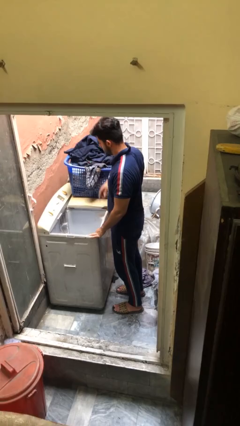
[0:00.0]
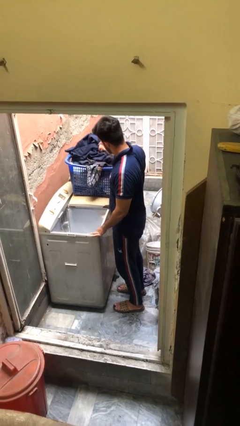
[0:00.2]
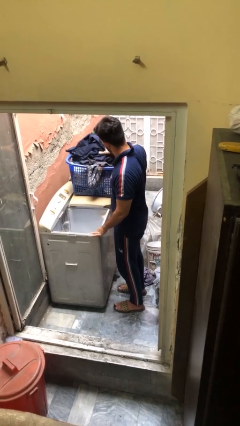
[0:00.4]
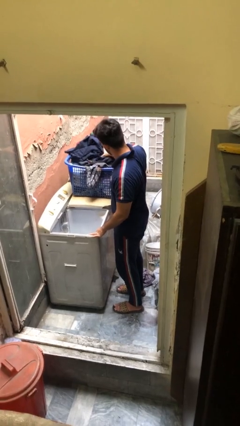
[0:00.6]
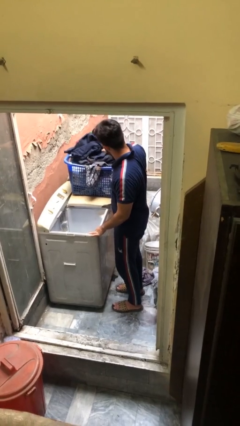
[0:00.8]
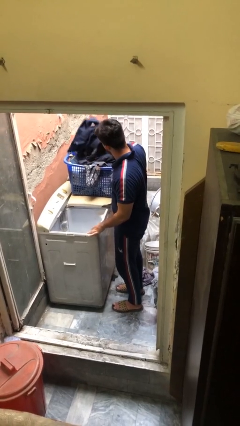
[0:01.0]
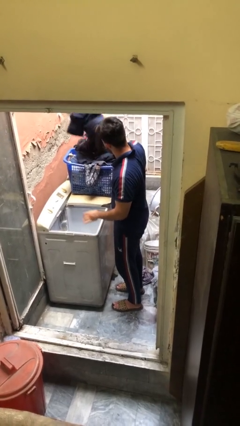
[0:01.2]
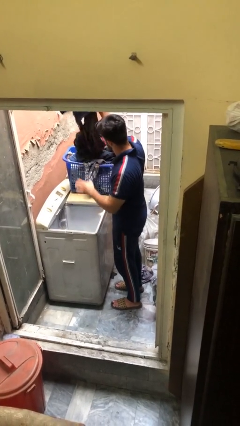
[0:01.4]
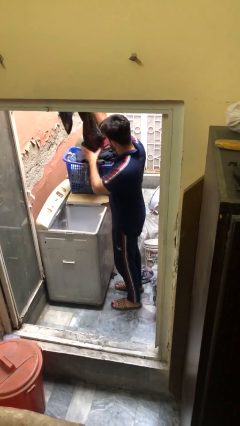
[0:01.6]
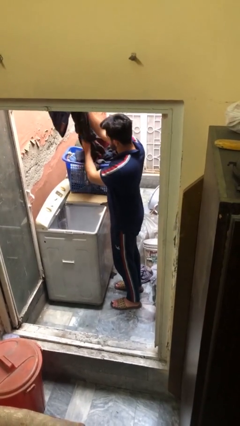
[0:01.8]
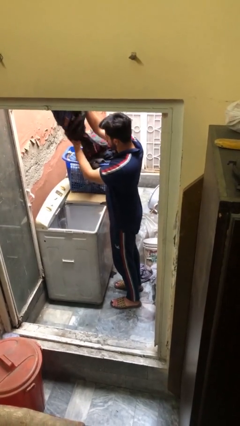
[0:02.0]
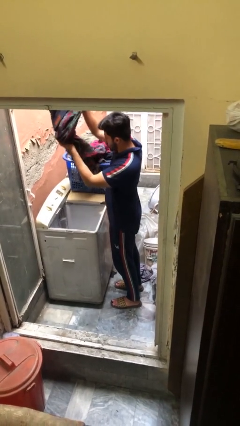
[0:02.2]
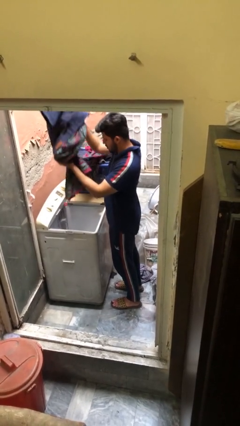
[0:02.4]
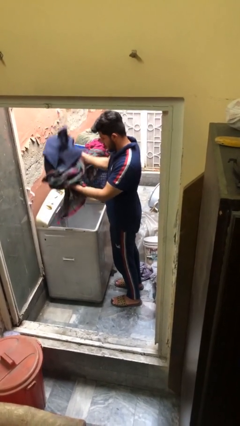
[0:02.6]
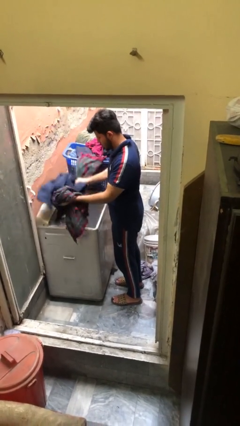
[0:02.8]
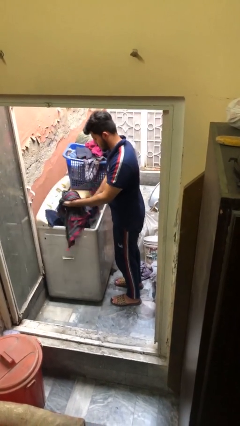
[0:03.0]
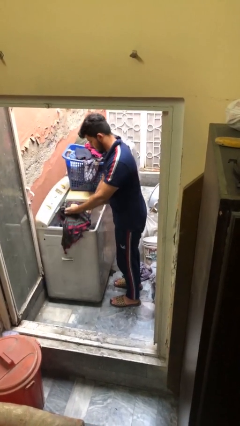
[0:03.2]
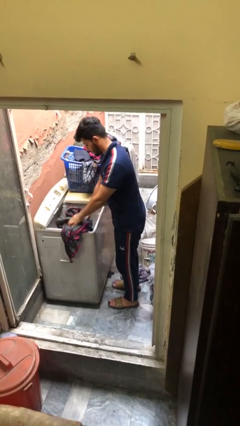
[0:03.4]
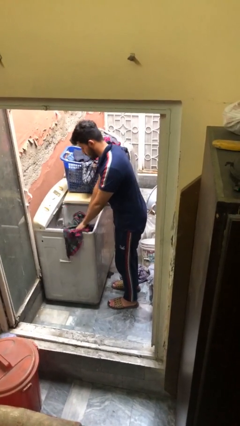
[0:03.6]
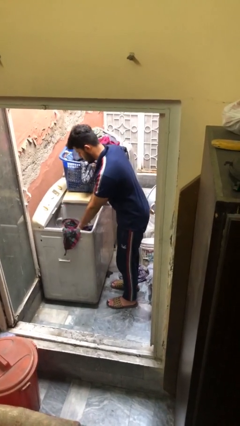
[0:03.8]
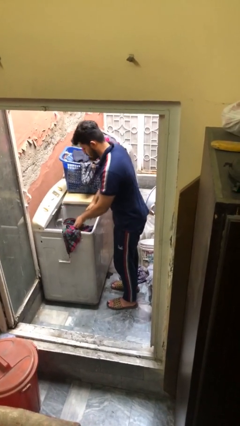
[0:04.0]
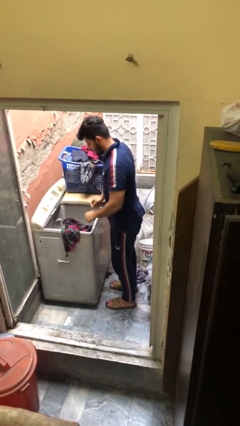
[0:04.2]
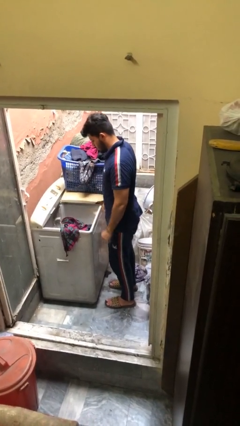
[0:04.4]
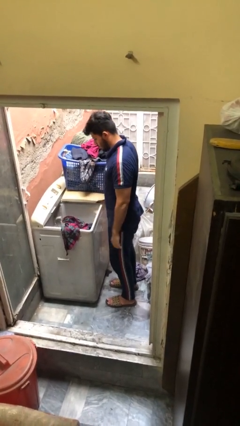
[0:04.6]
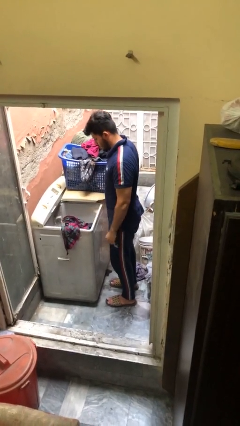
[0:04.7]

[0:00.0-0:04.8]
person loads clotheswasher

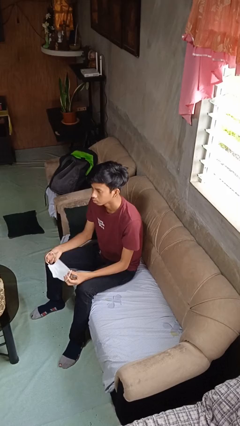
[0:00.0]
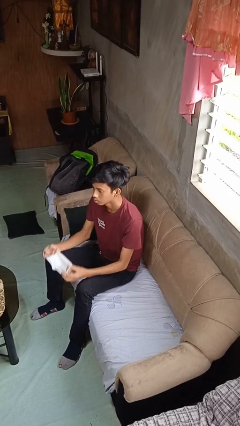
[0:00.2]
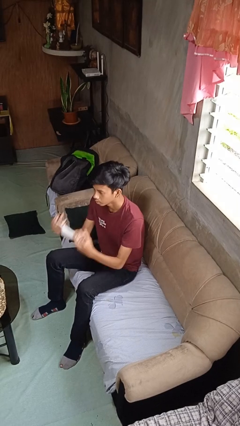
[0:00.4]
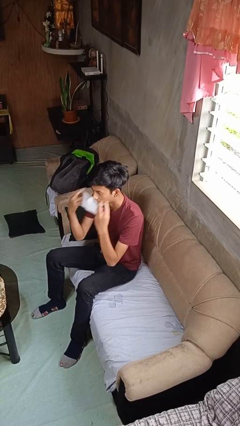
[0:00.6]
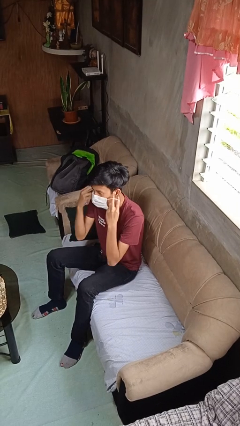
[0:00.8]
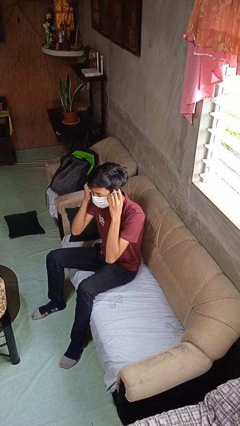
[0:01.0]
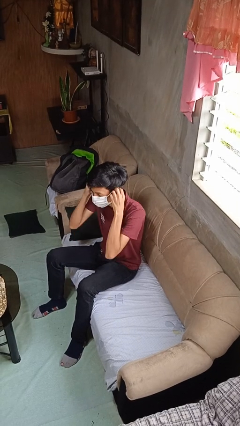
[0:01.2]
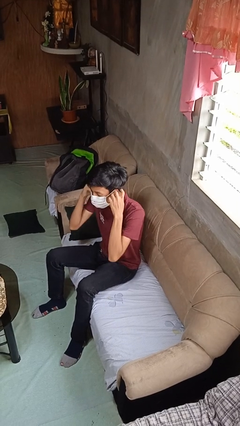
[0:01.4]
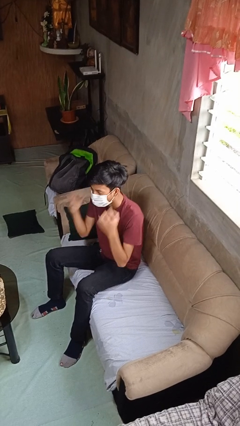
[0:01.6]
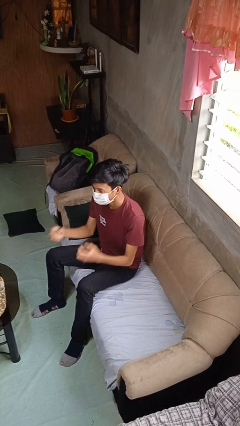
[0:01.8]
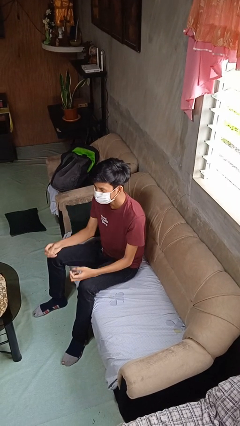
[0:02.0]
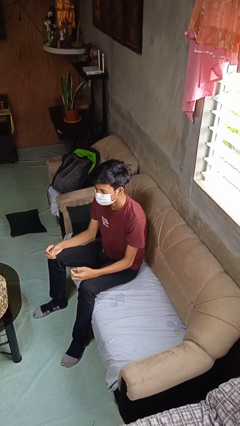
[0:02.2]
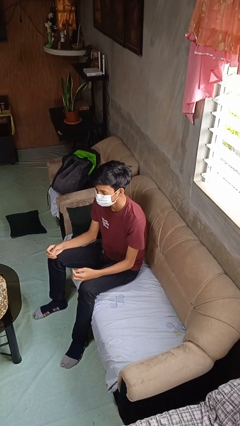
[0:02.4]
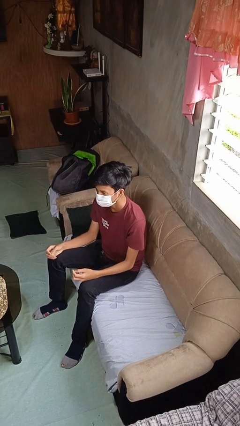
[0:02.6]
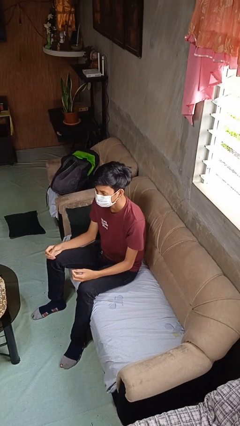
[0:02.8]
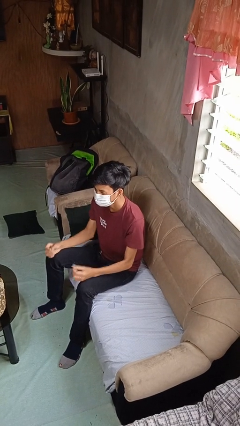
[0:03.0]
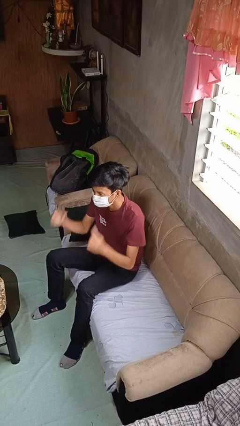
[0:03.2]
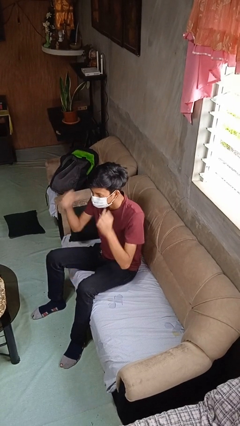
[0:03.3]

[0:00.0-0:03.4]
person puts on facemask

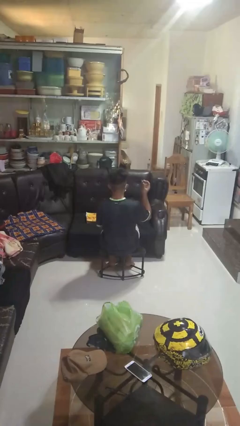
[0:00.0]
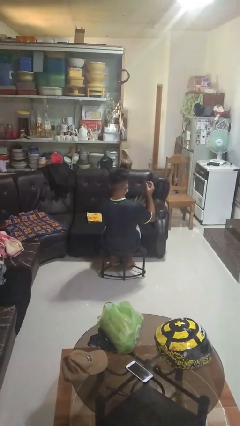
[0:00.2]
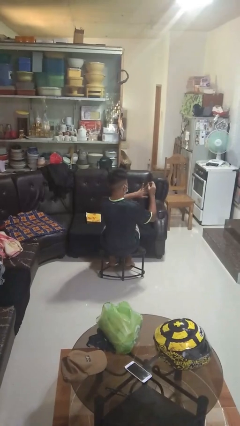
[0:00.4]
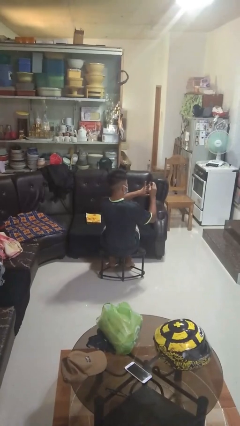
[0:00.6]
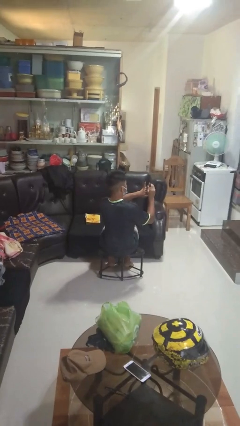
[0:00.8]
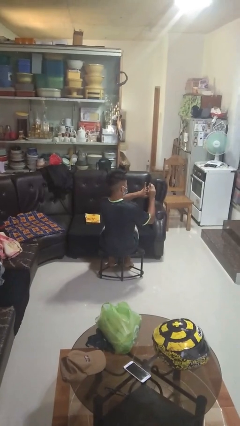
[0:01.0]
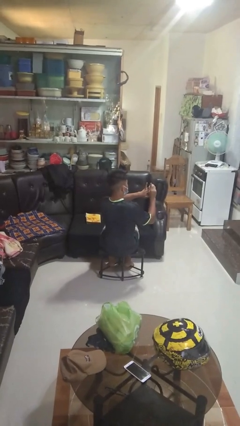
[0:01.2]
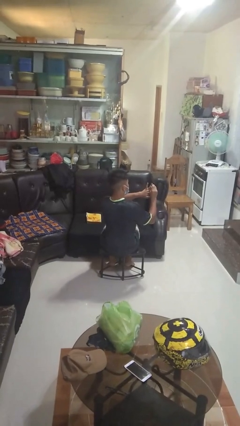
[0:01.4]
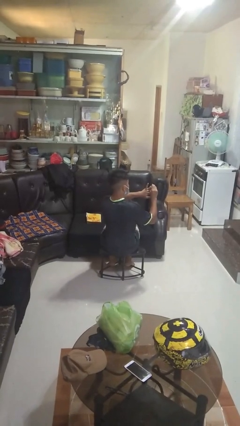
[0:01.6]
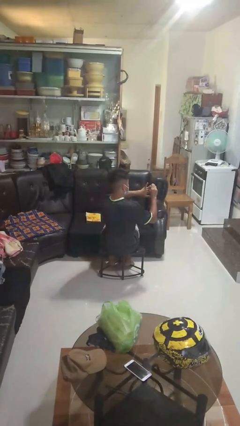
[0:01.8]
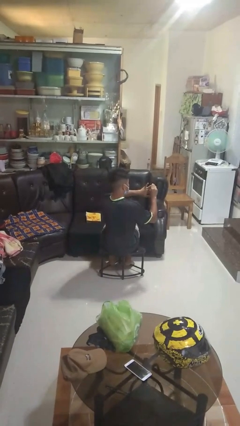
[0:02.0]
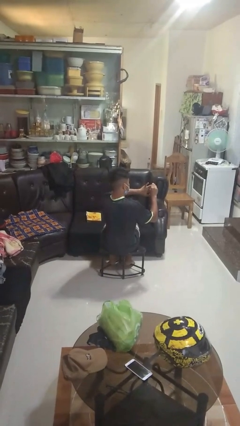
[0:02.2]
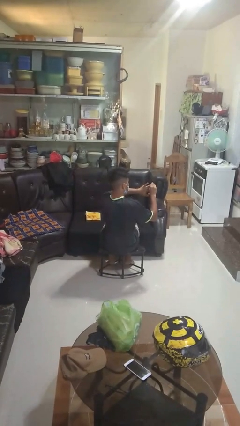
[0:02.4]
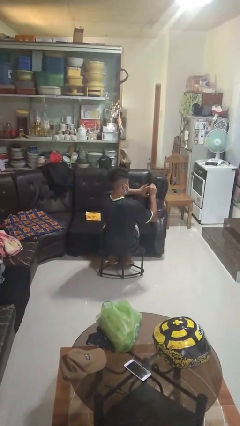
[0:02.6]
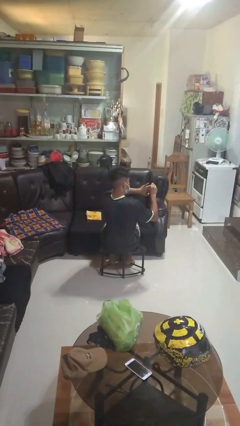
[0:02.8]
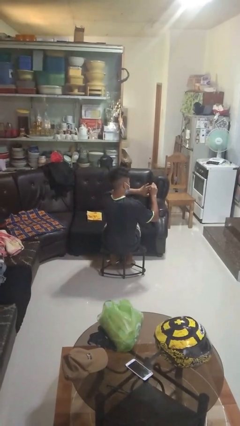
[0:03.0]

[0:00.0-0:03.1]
person clips fingernails

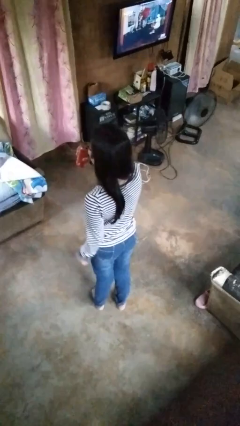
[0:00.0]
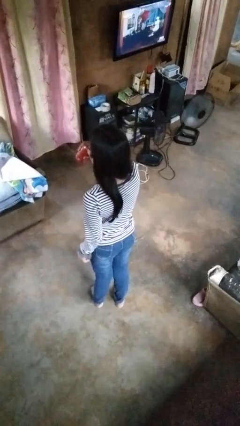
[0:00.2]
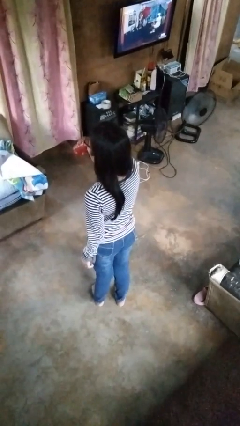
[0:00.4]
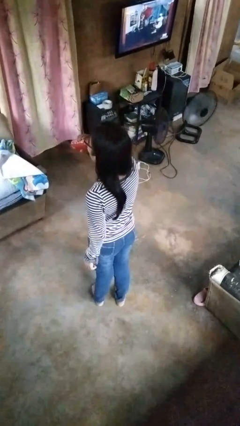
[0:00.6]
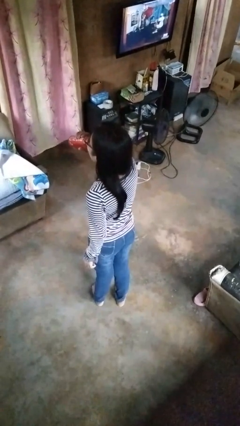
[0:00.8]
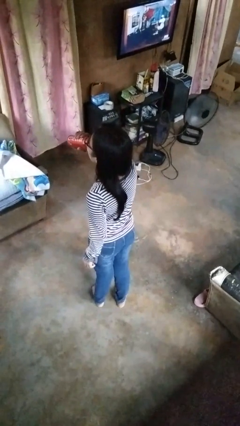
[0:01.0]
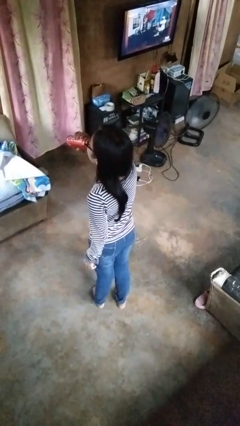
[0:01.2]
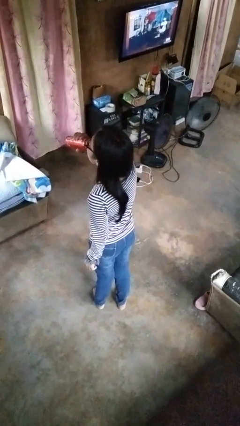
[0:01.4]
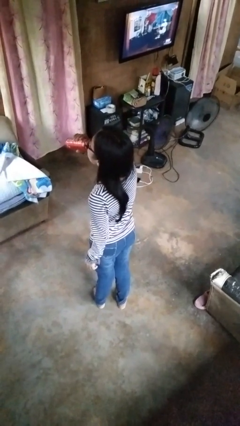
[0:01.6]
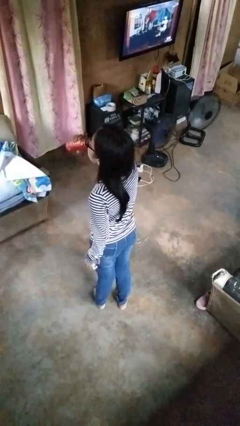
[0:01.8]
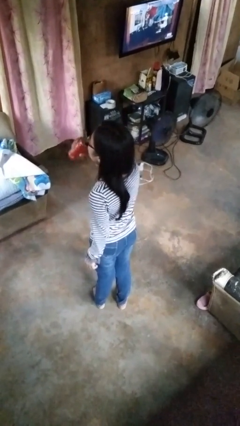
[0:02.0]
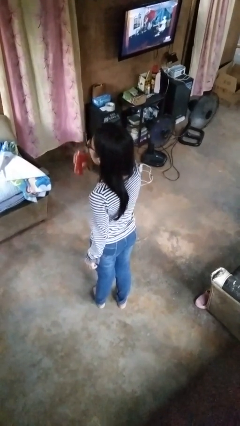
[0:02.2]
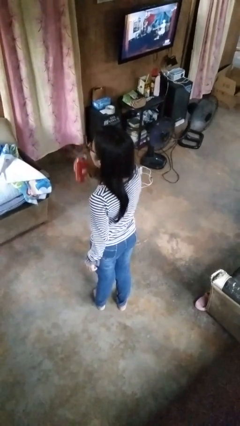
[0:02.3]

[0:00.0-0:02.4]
person drinks from beverage can

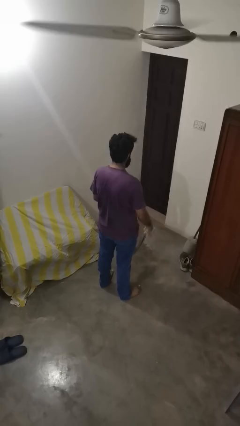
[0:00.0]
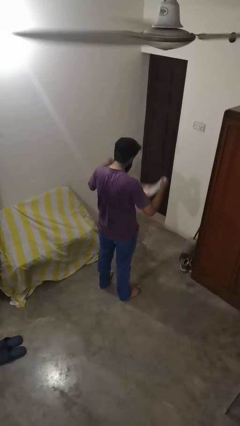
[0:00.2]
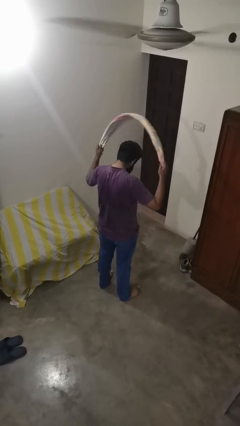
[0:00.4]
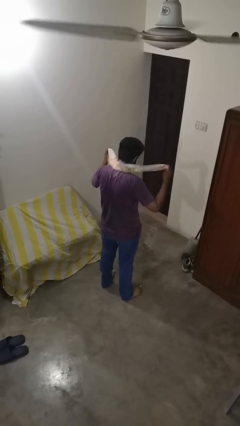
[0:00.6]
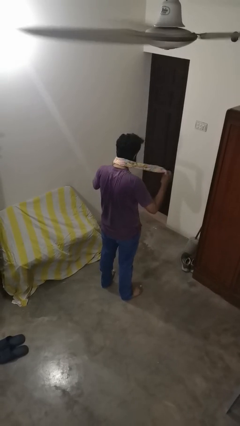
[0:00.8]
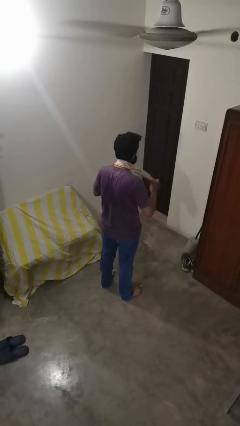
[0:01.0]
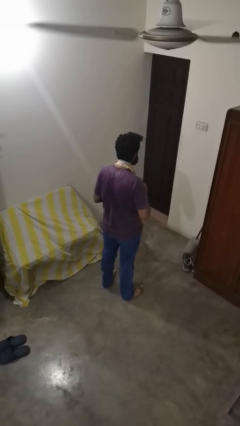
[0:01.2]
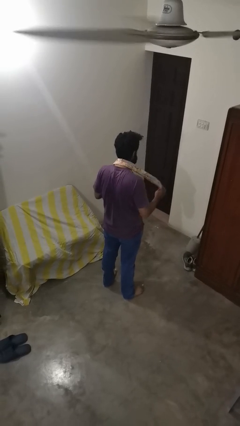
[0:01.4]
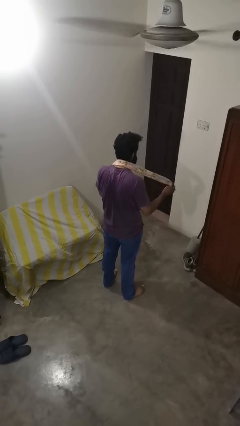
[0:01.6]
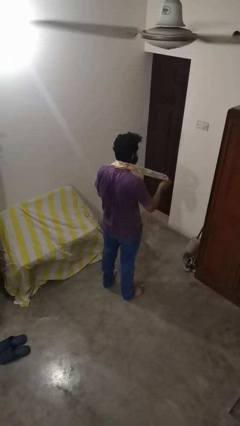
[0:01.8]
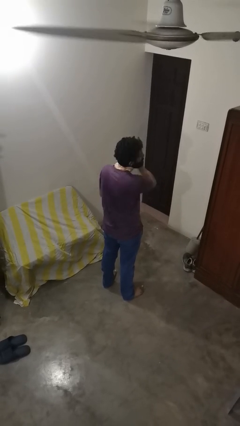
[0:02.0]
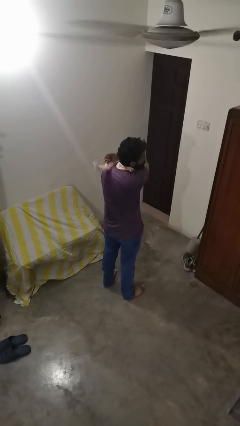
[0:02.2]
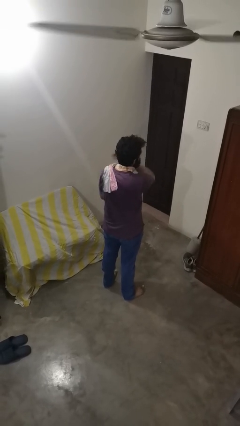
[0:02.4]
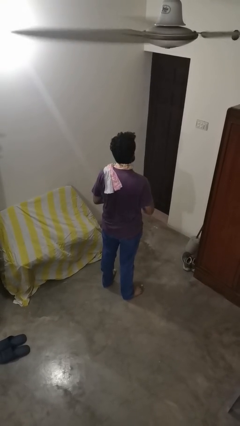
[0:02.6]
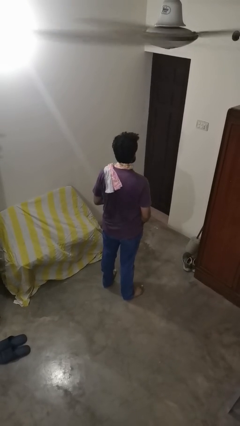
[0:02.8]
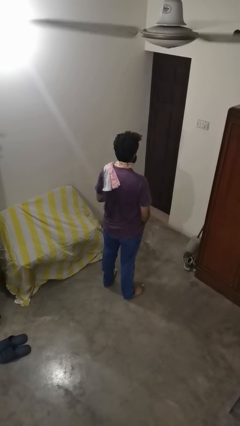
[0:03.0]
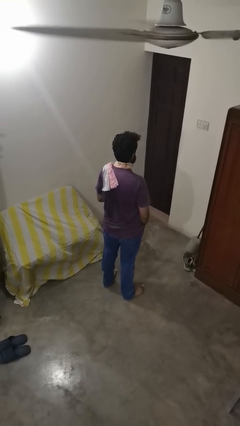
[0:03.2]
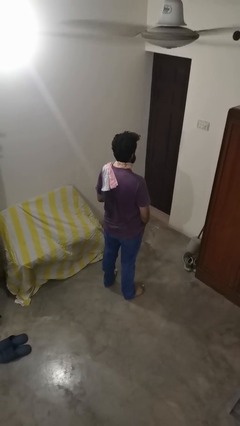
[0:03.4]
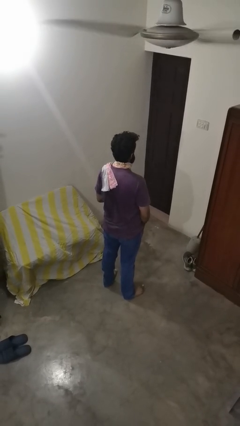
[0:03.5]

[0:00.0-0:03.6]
person puts on scarf

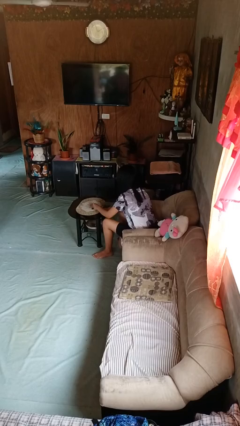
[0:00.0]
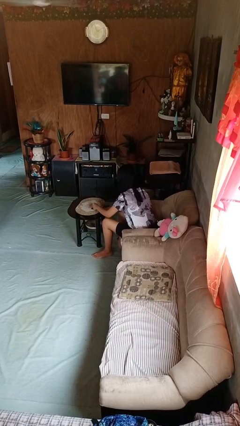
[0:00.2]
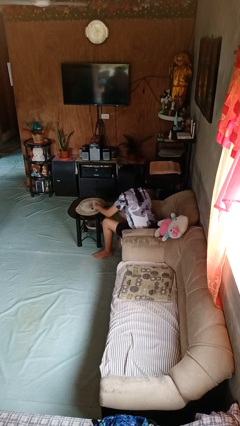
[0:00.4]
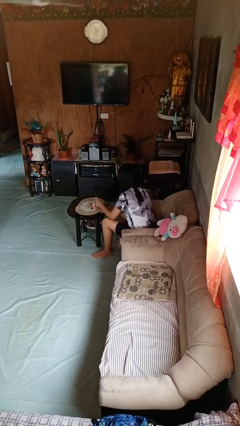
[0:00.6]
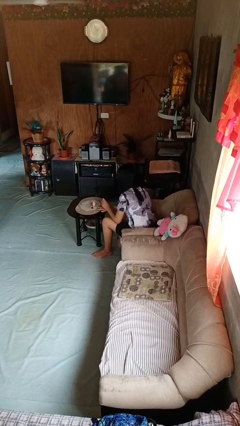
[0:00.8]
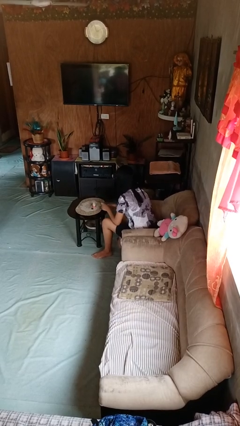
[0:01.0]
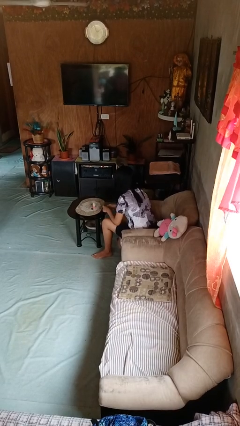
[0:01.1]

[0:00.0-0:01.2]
person paints fingernails
